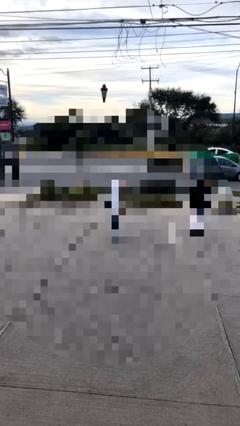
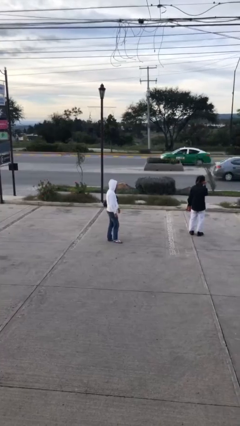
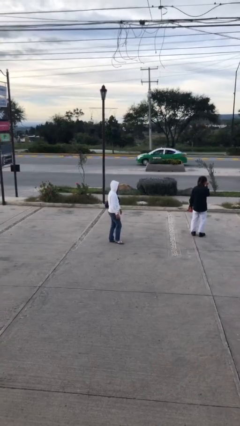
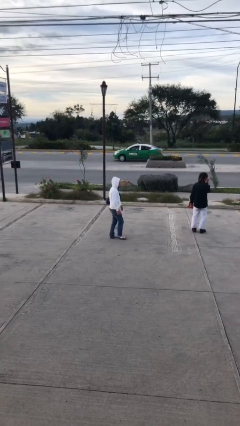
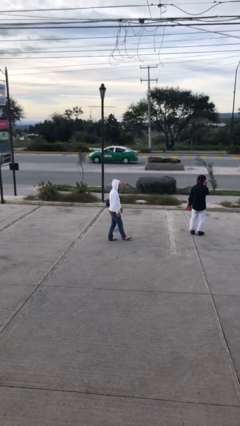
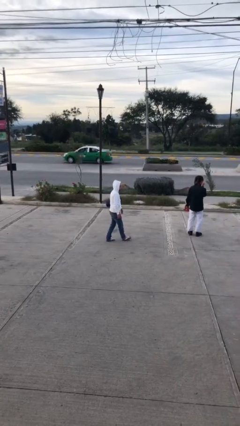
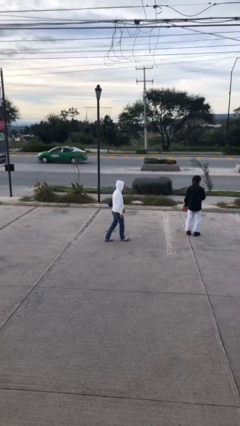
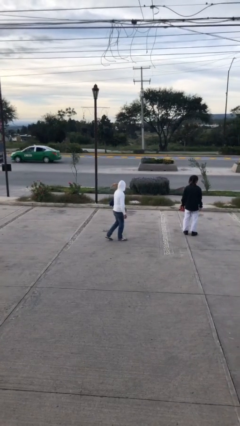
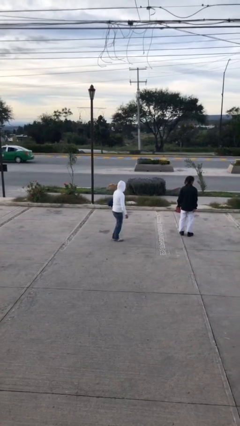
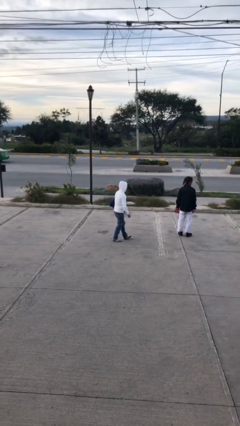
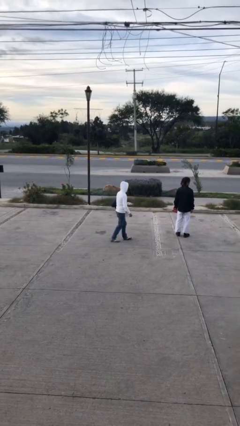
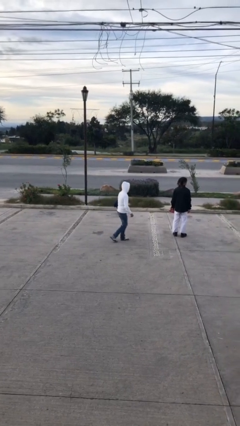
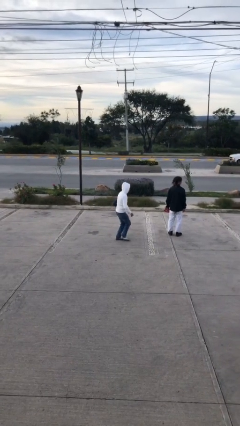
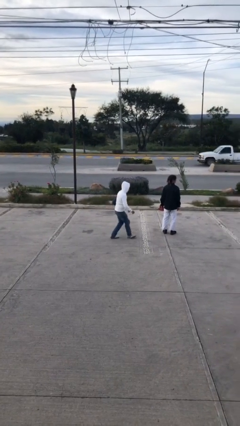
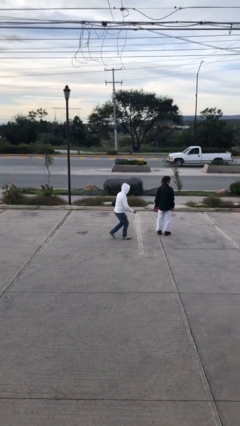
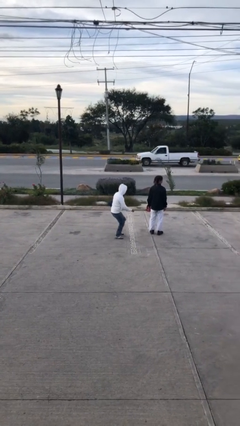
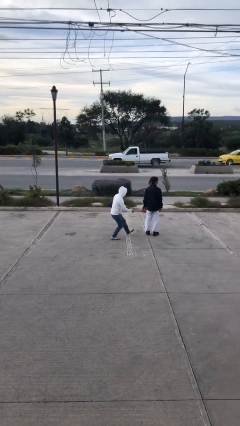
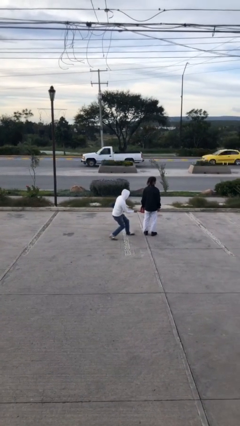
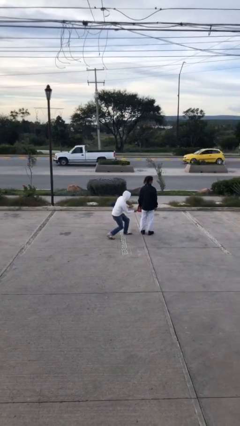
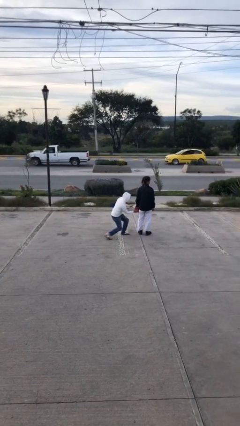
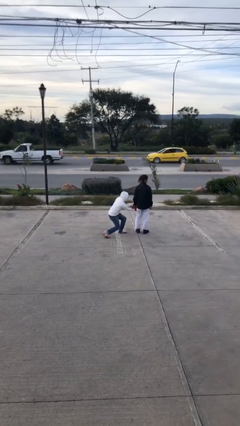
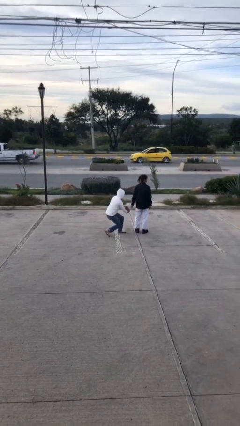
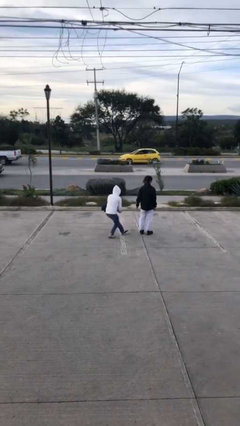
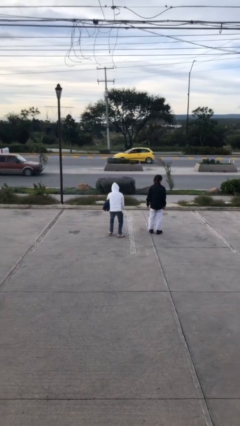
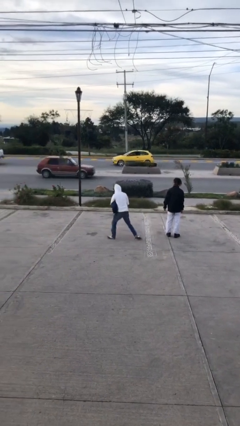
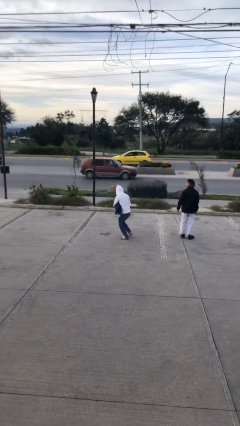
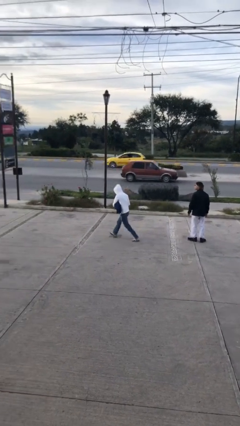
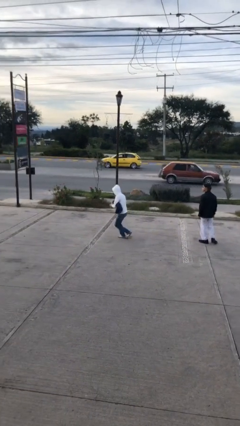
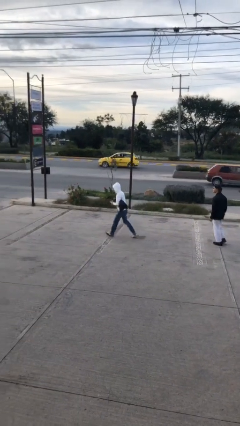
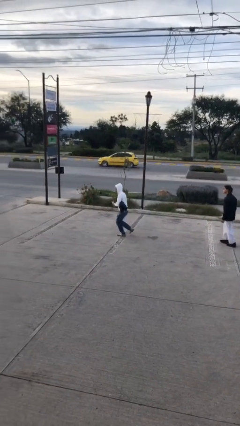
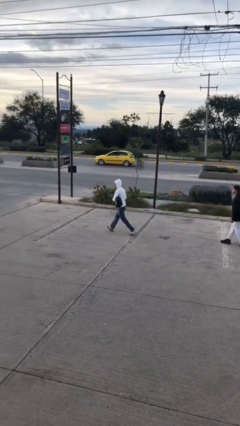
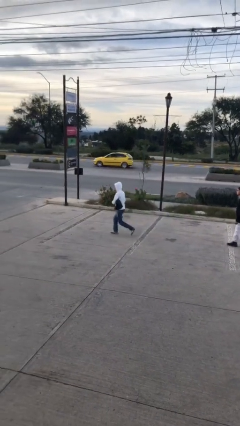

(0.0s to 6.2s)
person steals object from person

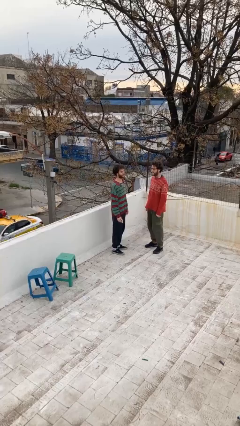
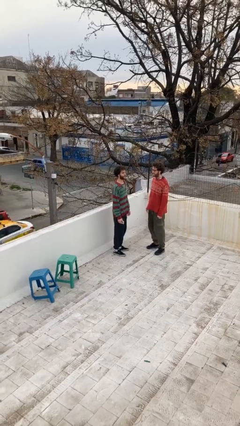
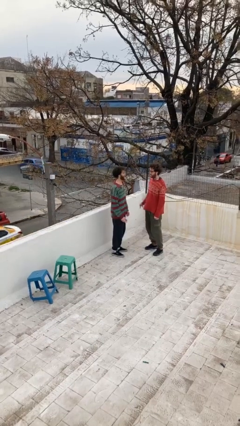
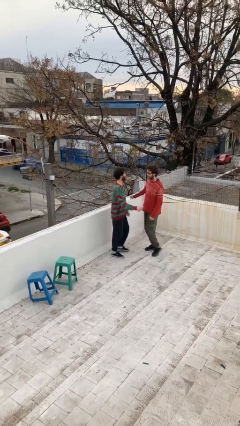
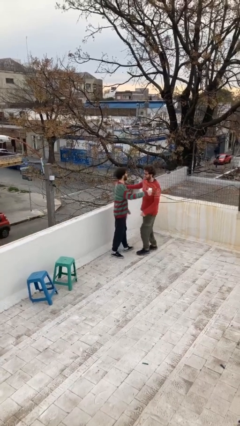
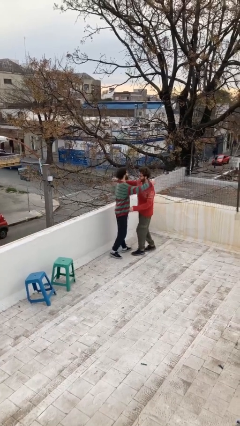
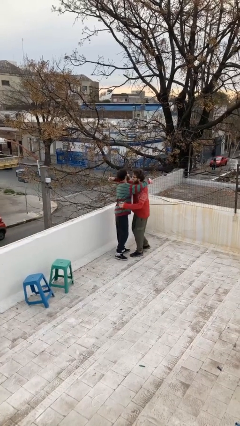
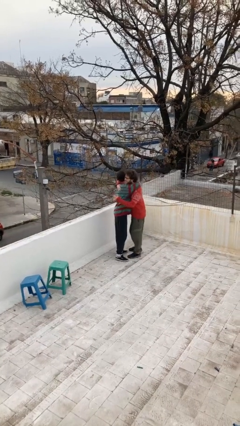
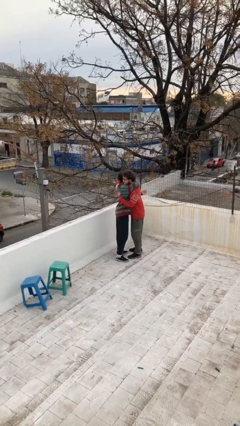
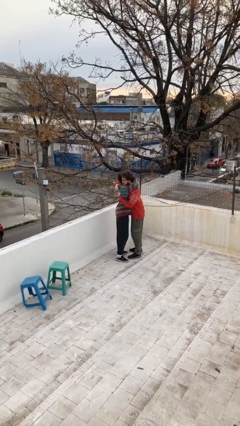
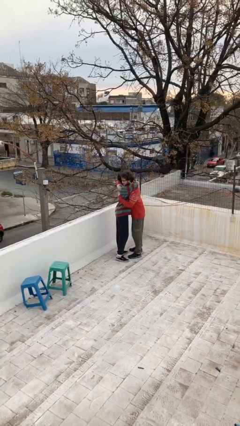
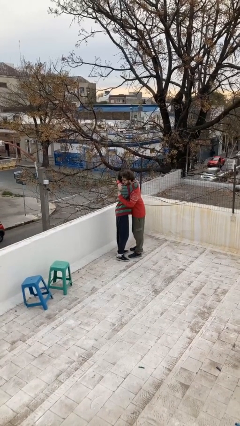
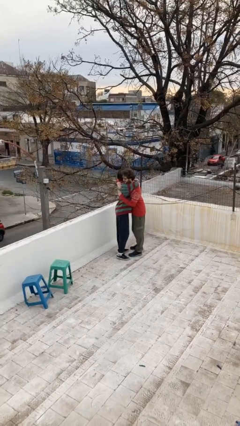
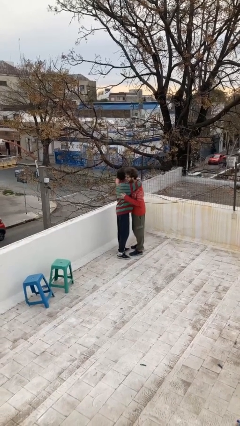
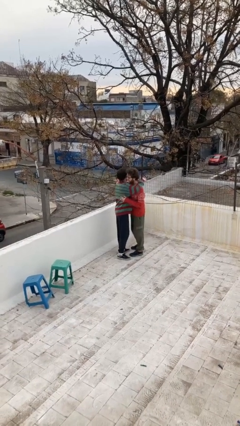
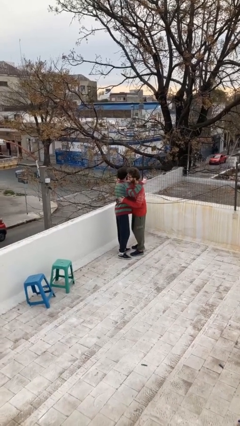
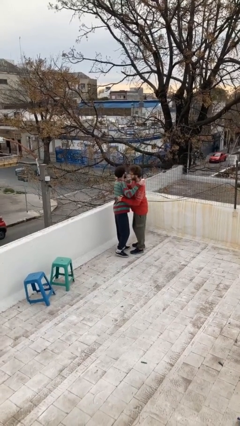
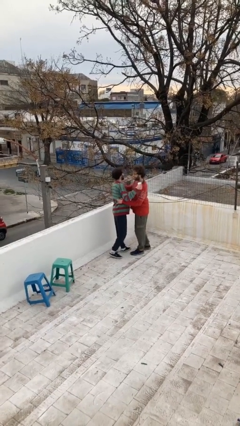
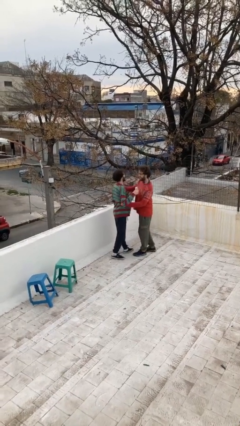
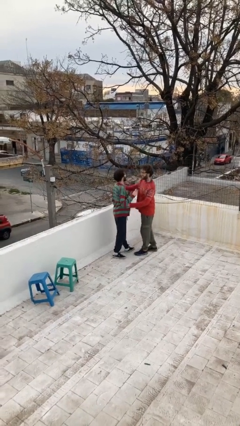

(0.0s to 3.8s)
person embraces person

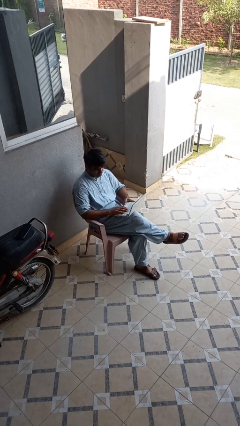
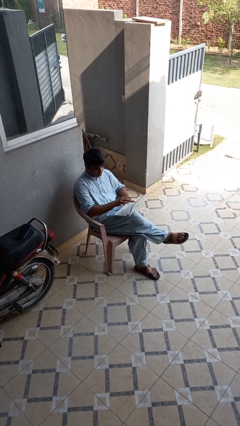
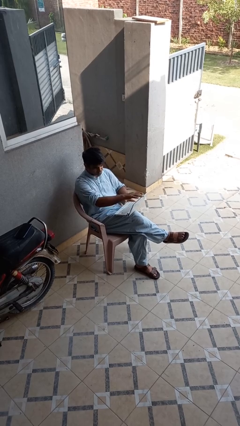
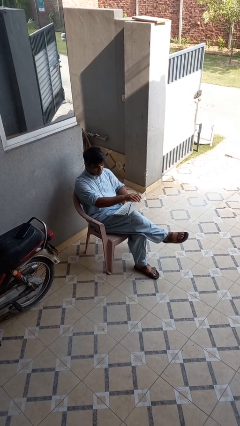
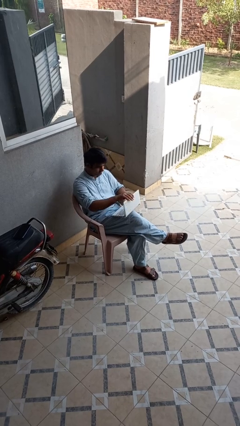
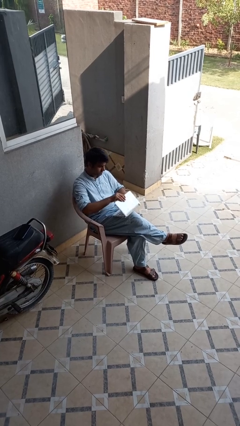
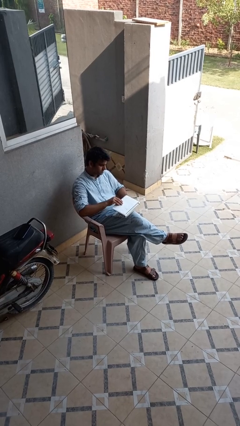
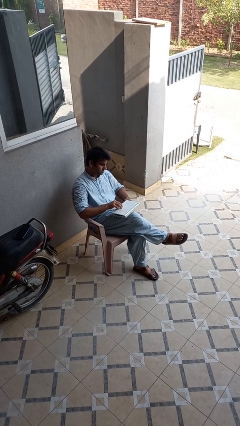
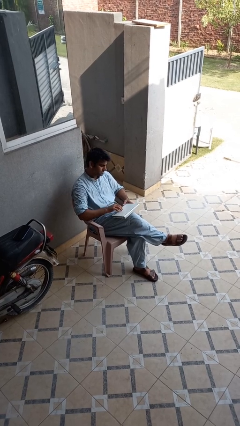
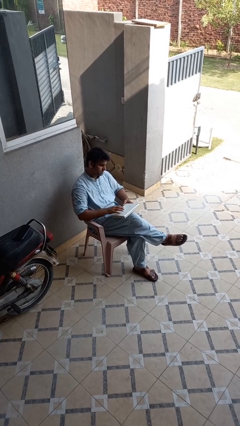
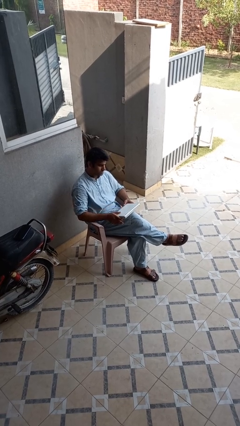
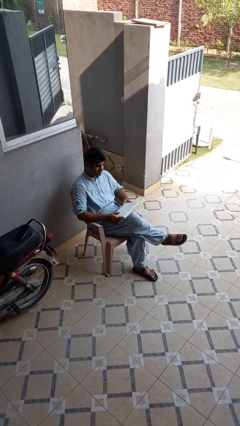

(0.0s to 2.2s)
person closes laptop

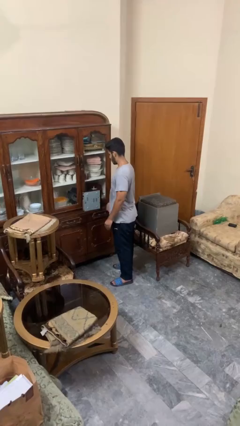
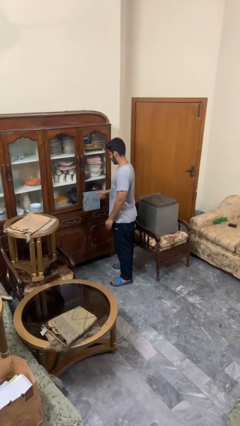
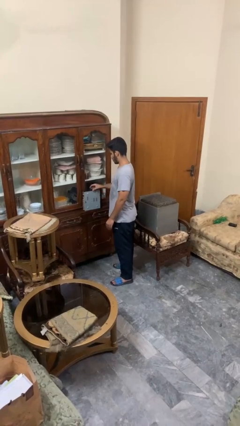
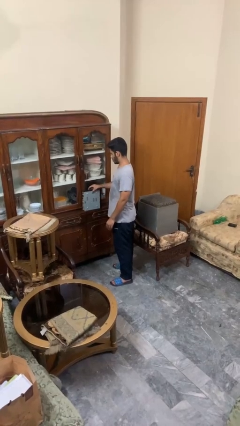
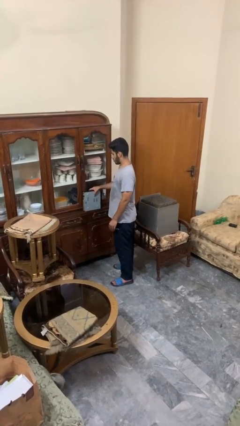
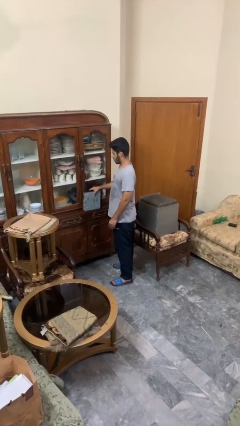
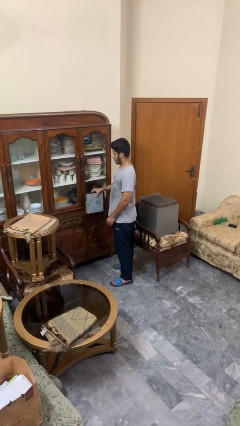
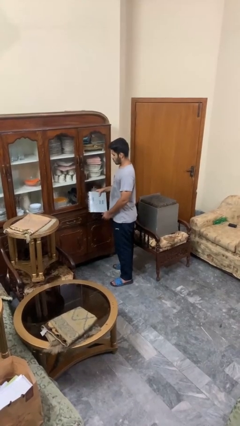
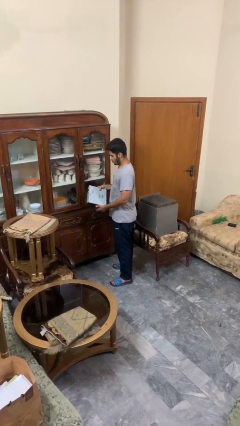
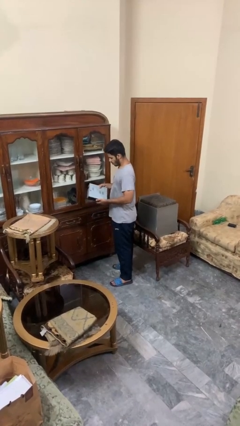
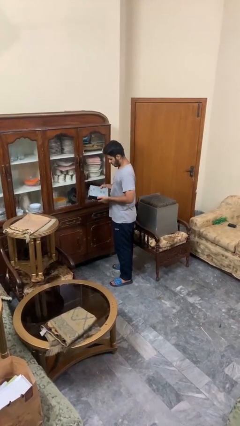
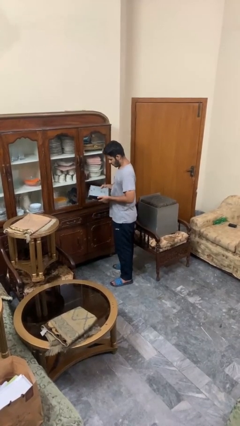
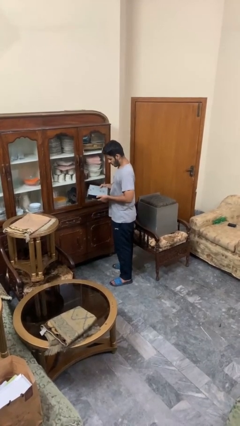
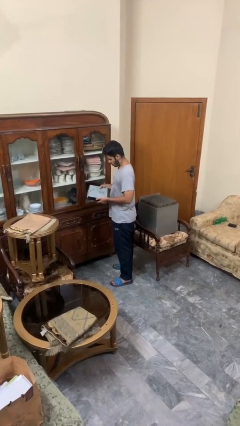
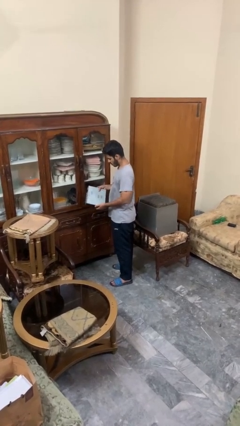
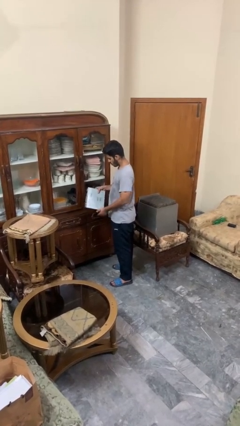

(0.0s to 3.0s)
person picks up object from countertop

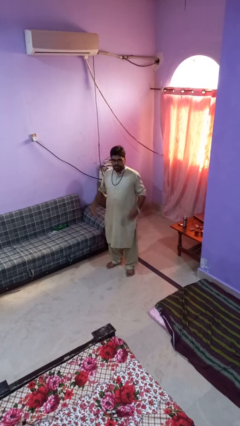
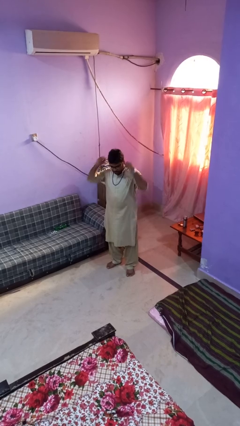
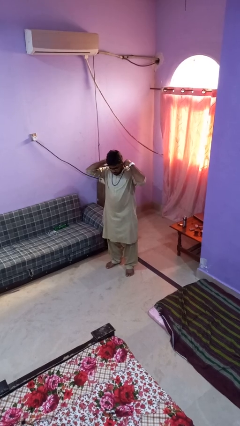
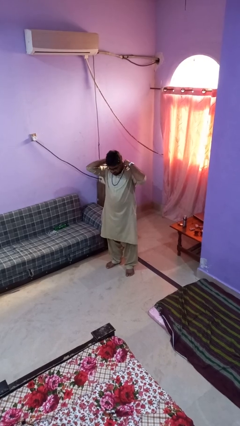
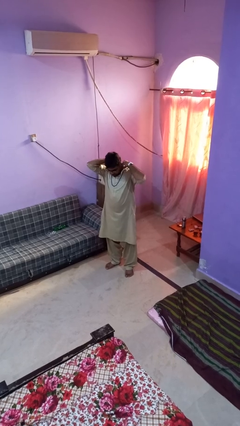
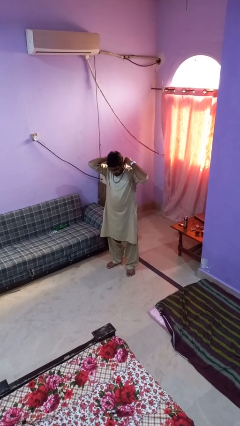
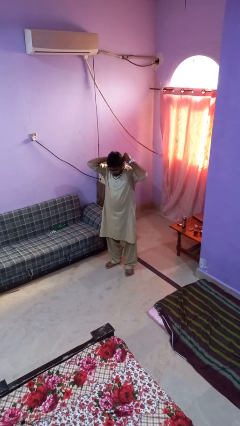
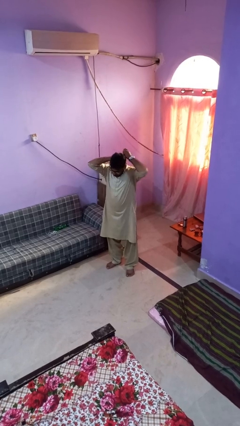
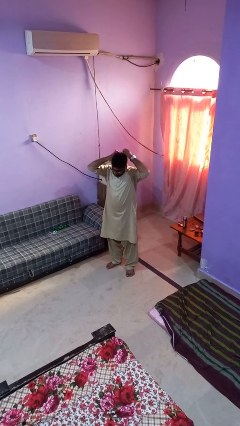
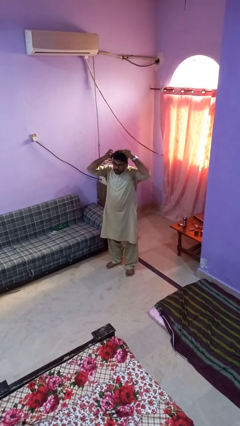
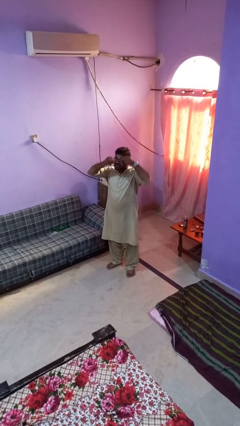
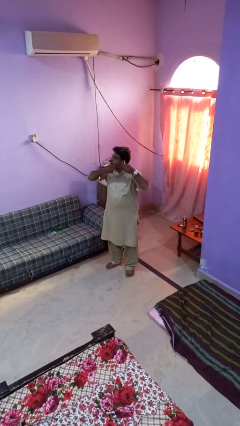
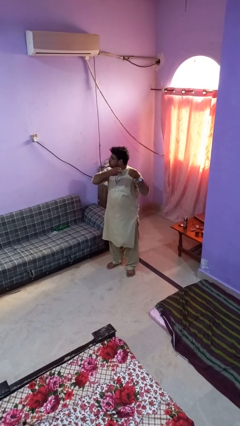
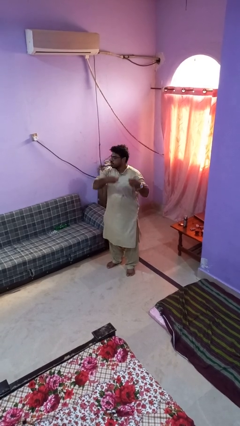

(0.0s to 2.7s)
person takes off necklace
